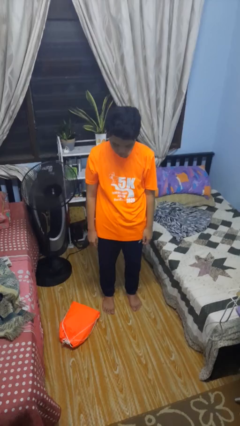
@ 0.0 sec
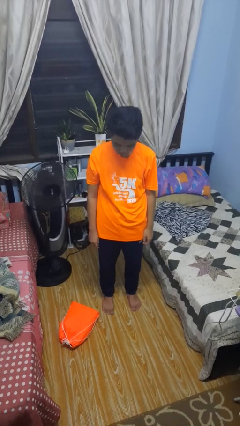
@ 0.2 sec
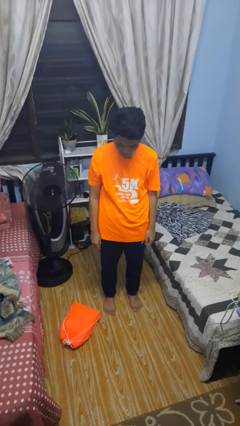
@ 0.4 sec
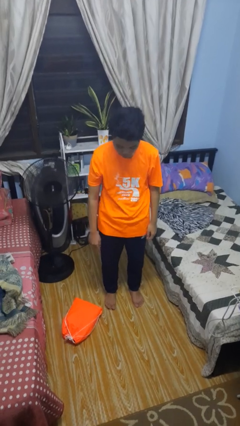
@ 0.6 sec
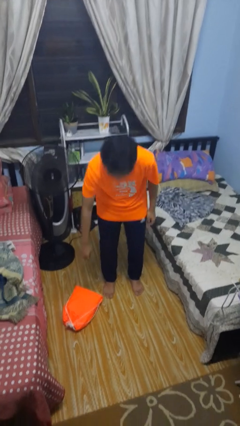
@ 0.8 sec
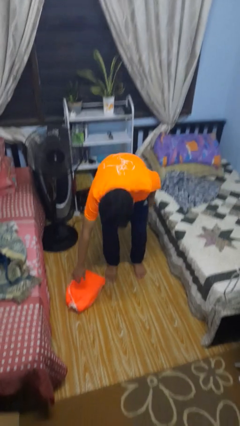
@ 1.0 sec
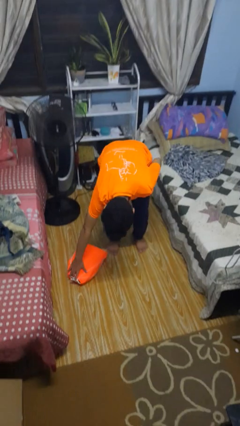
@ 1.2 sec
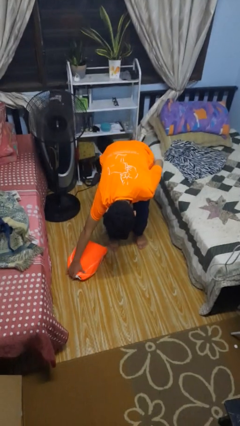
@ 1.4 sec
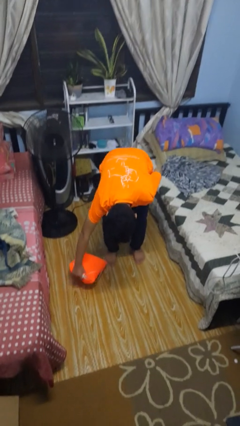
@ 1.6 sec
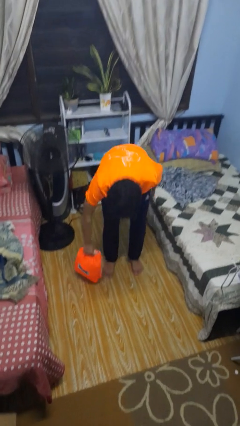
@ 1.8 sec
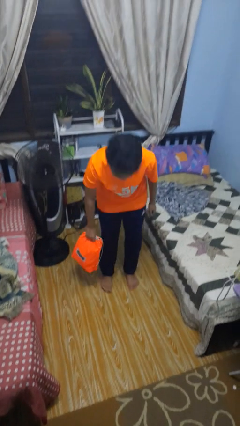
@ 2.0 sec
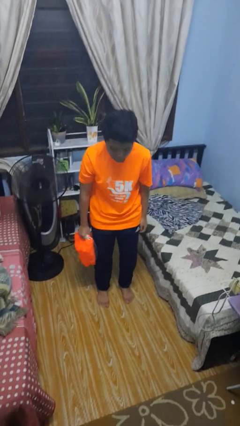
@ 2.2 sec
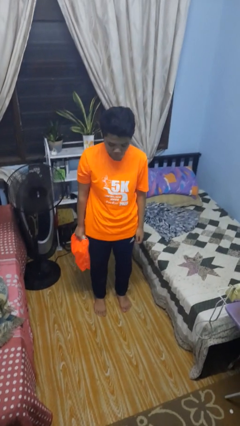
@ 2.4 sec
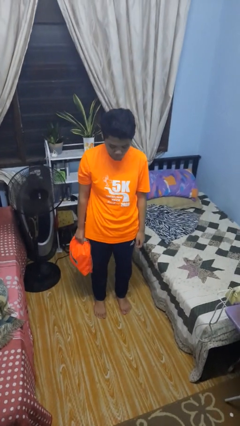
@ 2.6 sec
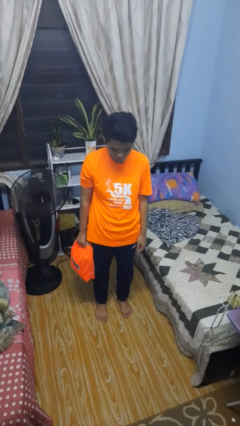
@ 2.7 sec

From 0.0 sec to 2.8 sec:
person picks up object from floor

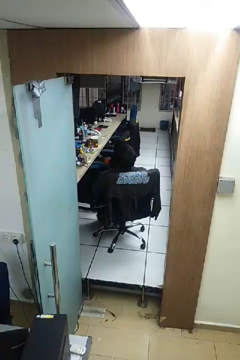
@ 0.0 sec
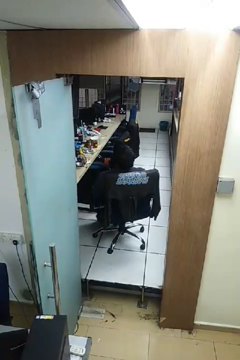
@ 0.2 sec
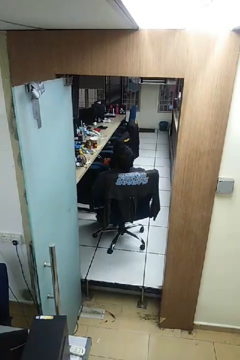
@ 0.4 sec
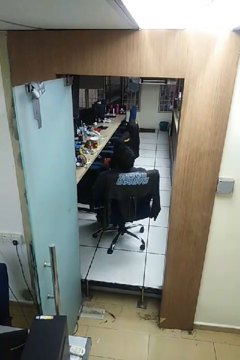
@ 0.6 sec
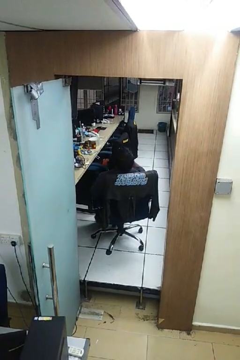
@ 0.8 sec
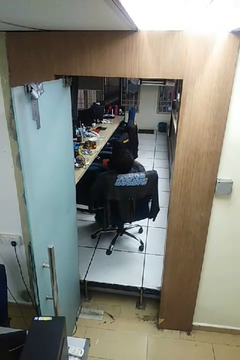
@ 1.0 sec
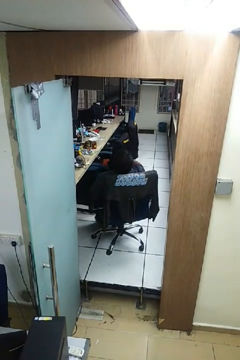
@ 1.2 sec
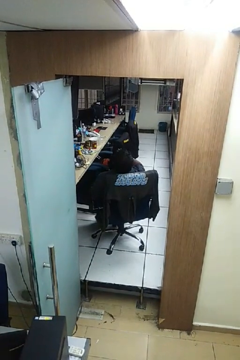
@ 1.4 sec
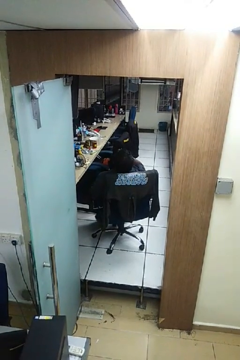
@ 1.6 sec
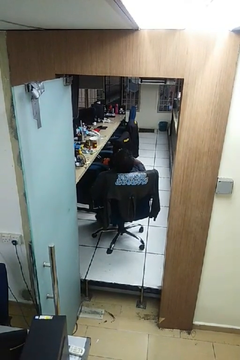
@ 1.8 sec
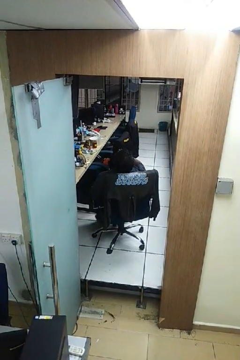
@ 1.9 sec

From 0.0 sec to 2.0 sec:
person yawns

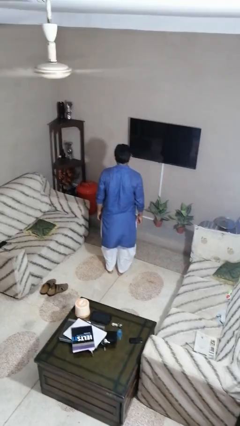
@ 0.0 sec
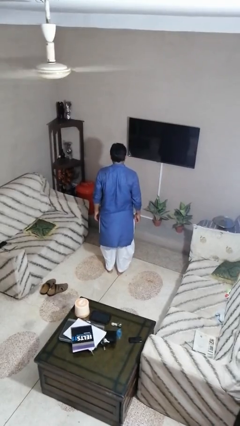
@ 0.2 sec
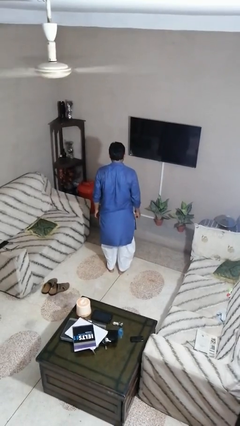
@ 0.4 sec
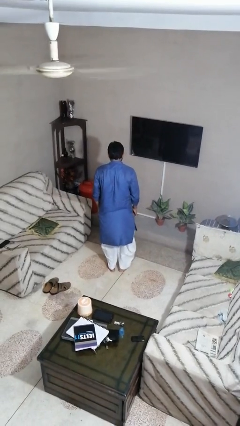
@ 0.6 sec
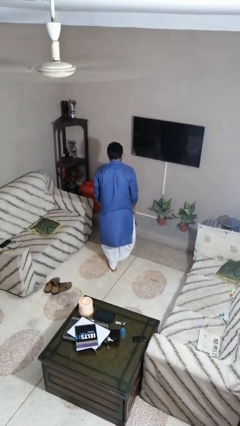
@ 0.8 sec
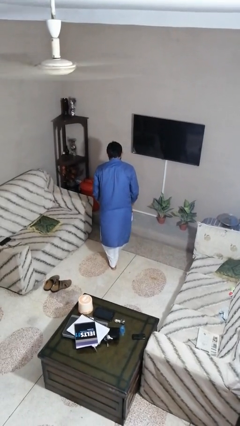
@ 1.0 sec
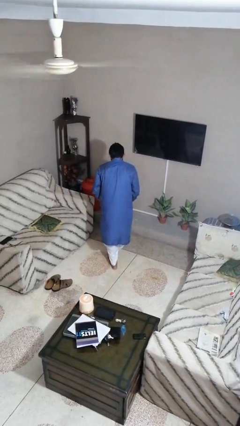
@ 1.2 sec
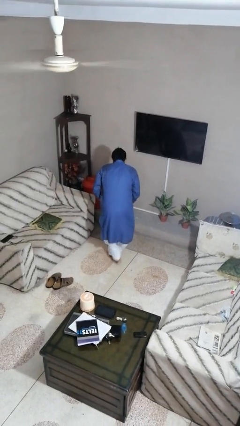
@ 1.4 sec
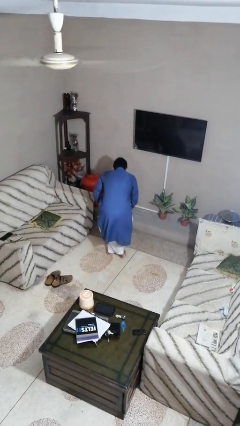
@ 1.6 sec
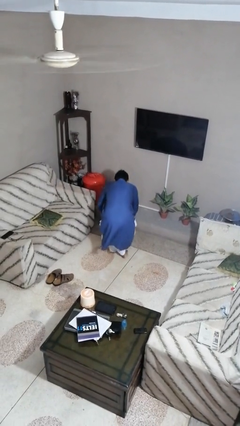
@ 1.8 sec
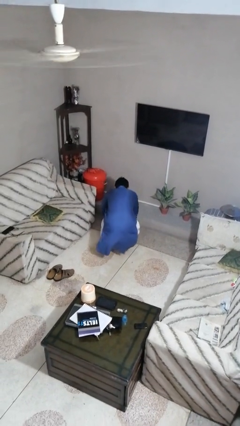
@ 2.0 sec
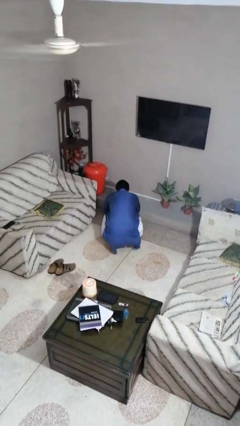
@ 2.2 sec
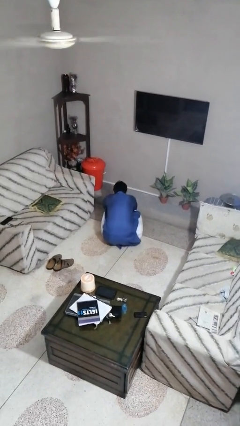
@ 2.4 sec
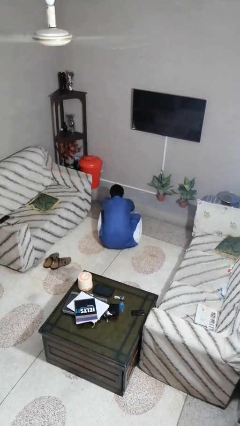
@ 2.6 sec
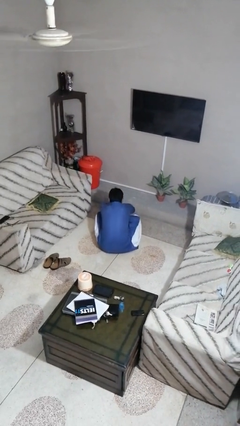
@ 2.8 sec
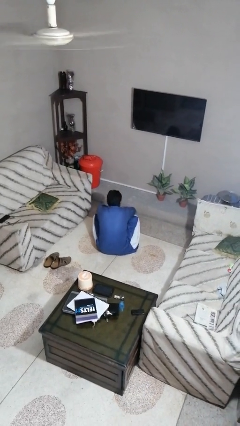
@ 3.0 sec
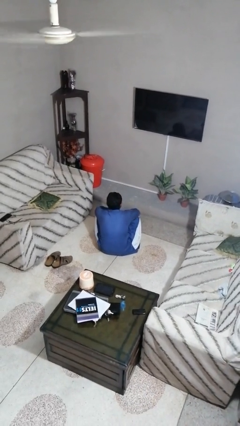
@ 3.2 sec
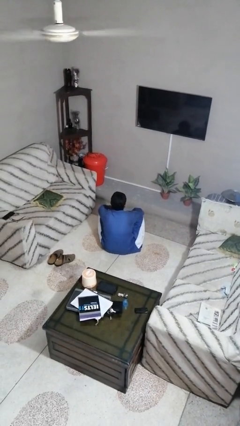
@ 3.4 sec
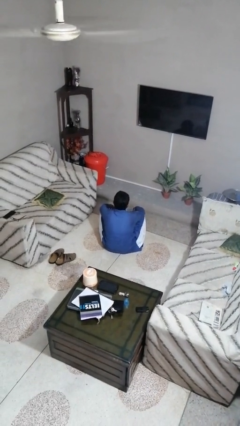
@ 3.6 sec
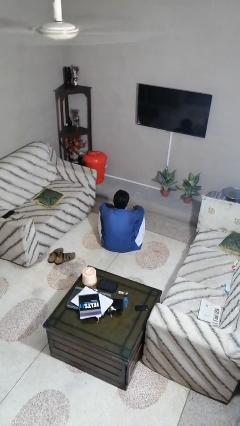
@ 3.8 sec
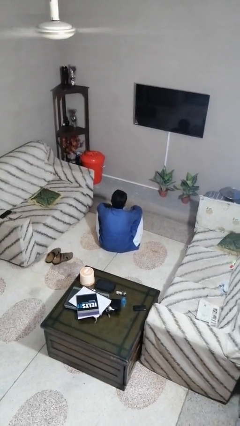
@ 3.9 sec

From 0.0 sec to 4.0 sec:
person sits crisscross

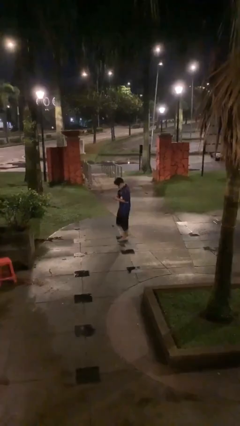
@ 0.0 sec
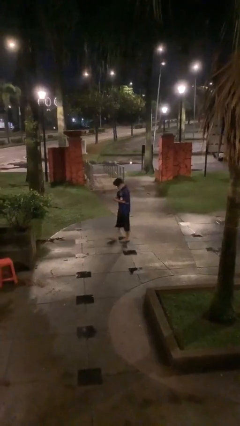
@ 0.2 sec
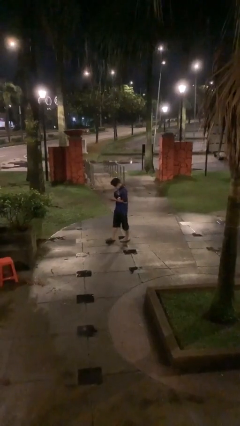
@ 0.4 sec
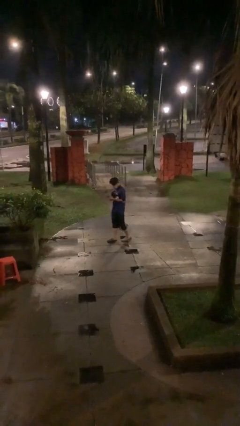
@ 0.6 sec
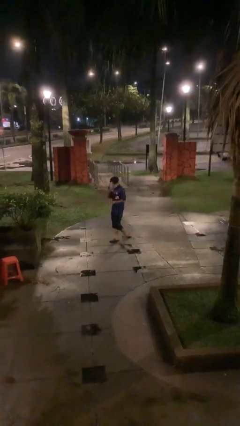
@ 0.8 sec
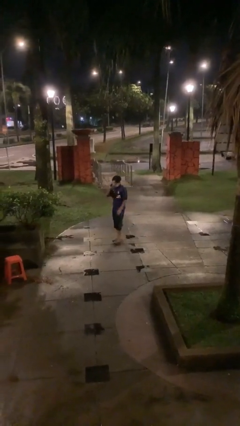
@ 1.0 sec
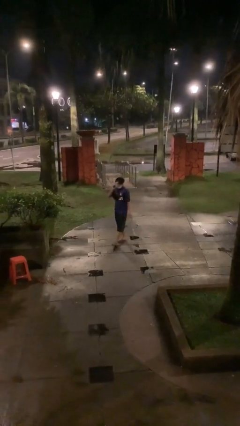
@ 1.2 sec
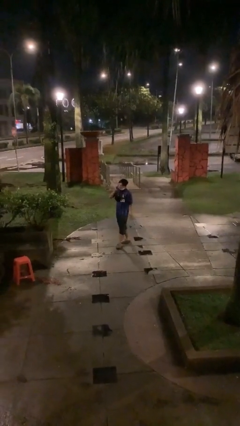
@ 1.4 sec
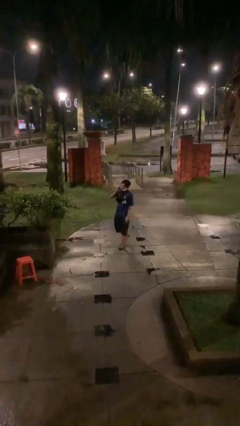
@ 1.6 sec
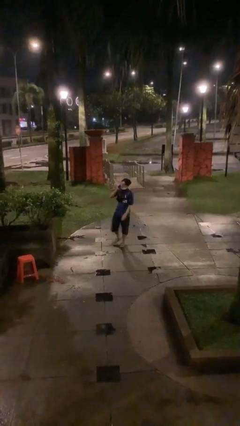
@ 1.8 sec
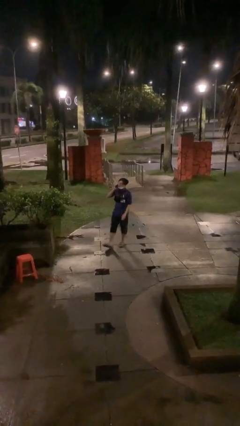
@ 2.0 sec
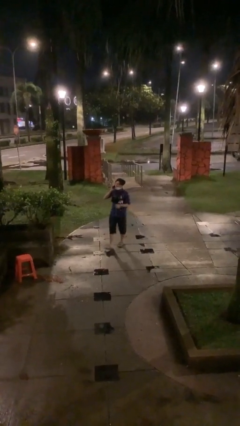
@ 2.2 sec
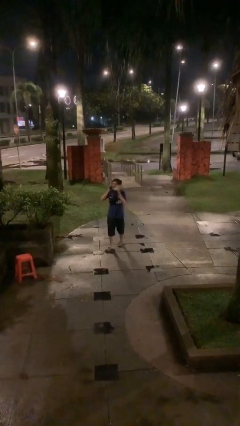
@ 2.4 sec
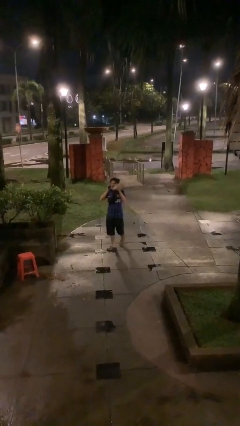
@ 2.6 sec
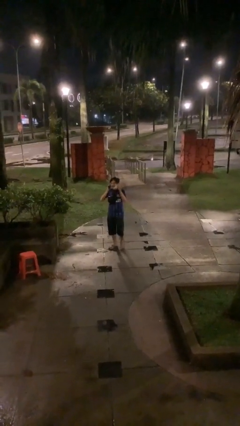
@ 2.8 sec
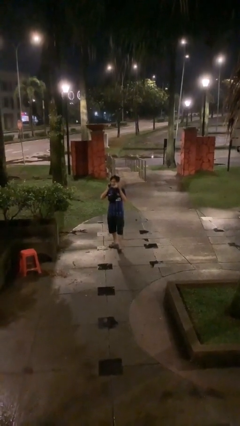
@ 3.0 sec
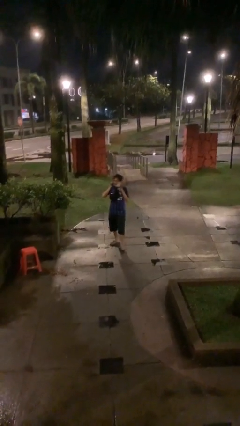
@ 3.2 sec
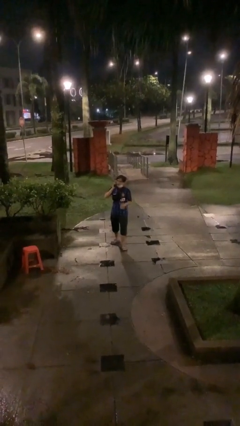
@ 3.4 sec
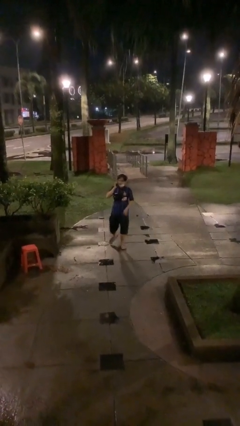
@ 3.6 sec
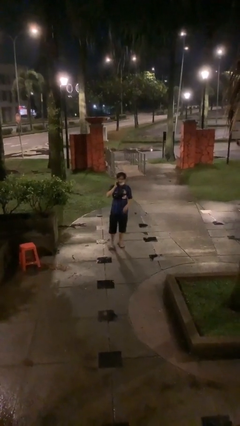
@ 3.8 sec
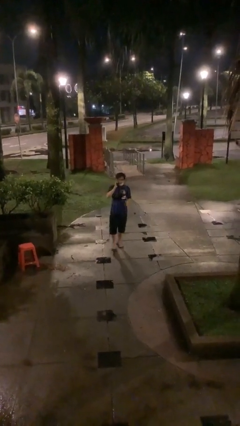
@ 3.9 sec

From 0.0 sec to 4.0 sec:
person talks on phone

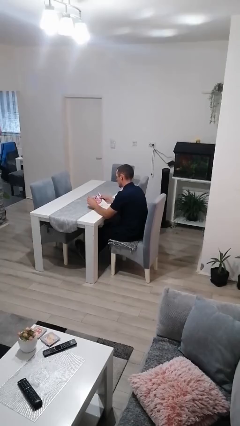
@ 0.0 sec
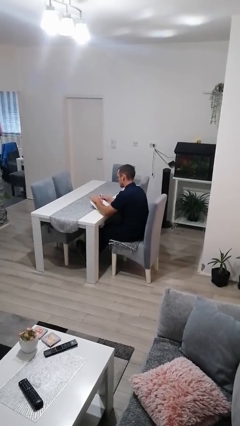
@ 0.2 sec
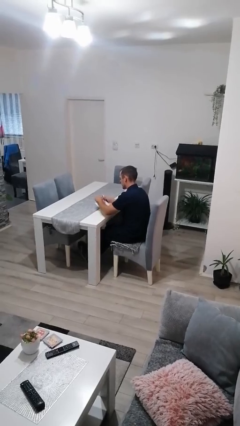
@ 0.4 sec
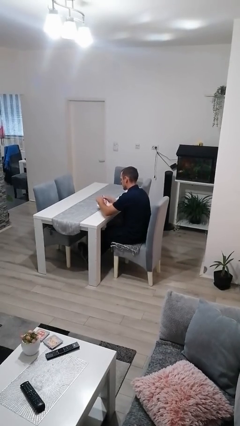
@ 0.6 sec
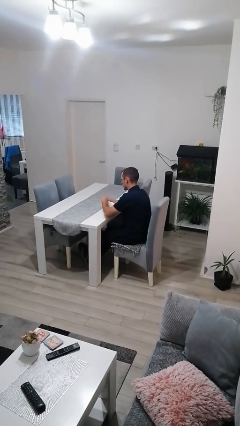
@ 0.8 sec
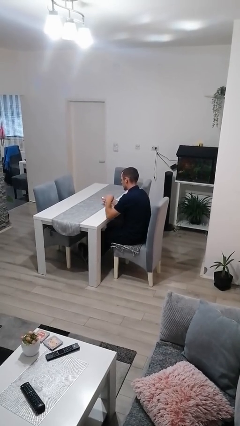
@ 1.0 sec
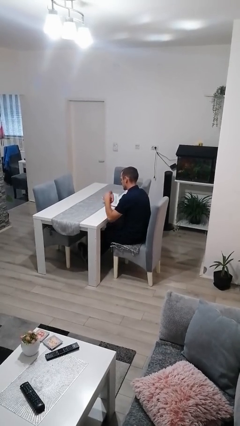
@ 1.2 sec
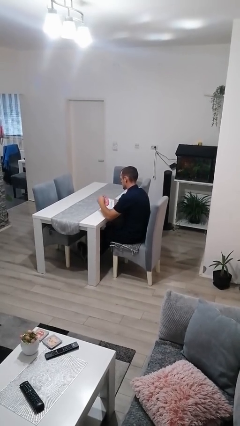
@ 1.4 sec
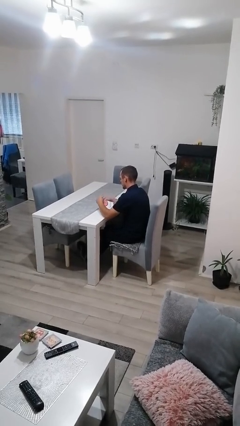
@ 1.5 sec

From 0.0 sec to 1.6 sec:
person tears paper

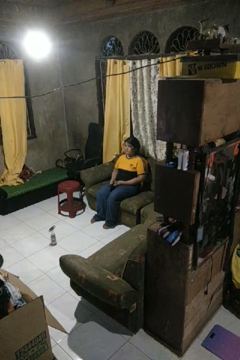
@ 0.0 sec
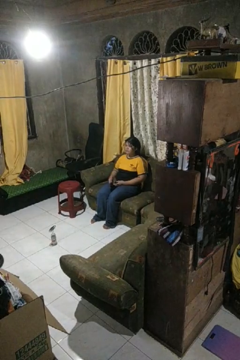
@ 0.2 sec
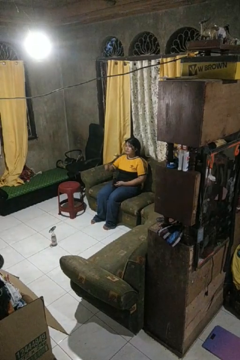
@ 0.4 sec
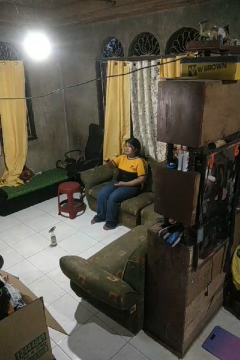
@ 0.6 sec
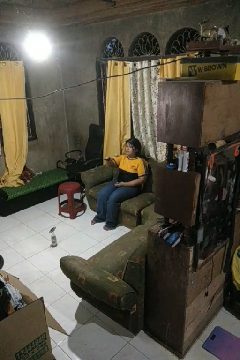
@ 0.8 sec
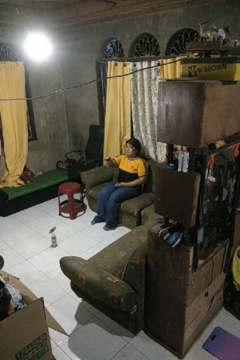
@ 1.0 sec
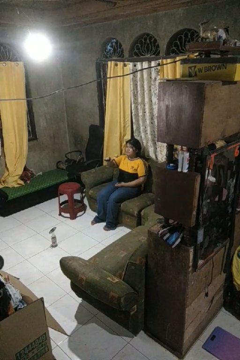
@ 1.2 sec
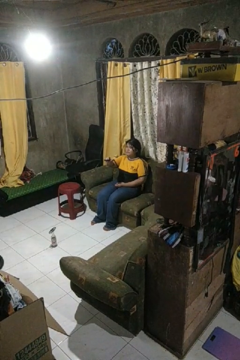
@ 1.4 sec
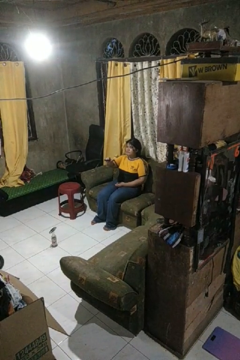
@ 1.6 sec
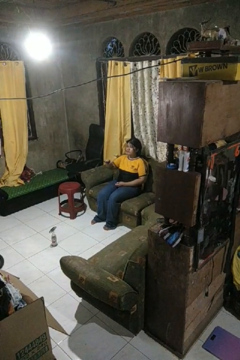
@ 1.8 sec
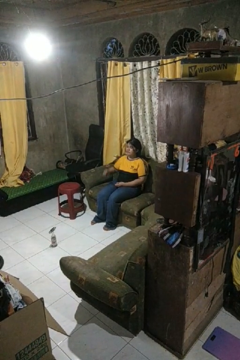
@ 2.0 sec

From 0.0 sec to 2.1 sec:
person uses television remote

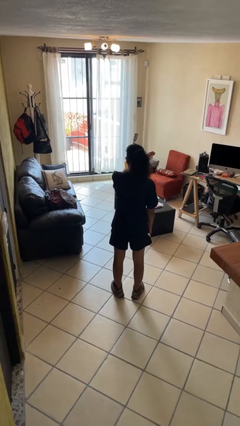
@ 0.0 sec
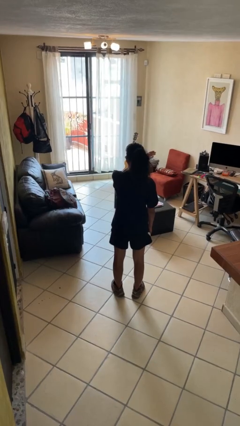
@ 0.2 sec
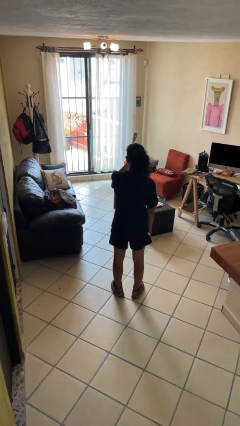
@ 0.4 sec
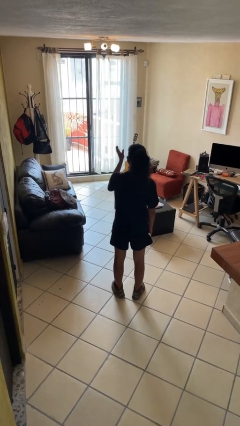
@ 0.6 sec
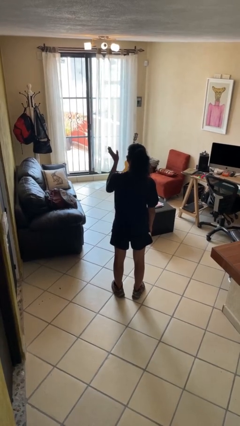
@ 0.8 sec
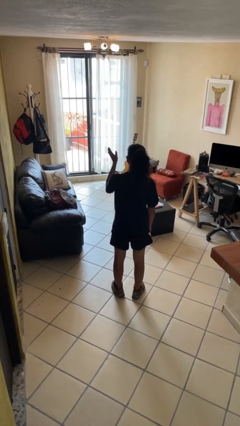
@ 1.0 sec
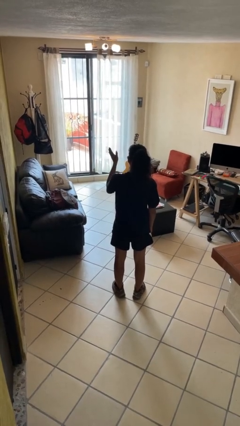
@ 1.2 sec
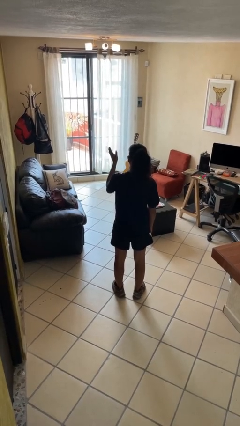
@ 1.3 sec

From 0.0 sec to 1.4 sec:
person gestures swipe left
